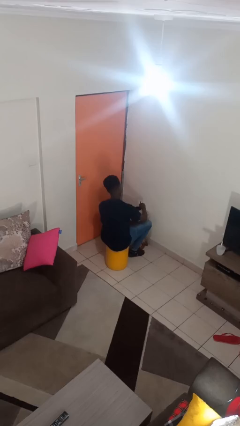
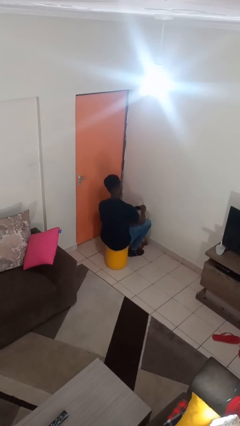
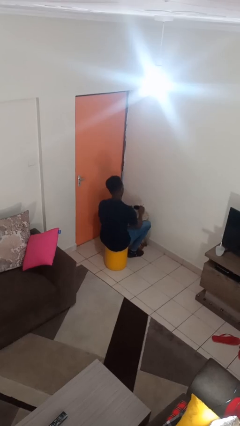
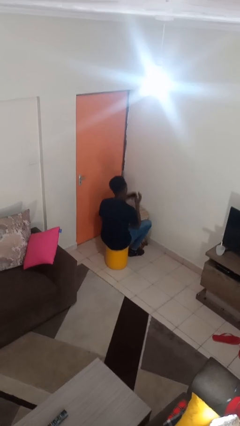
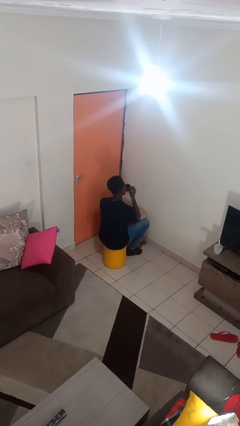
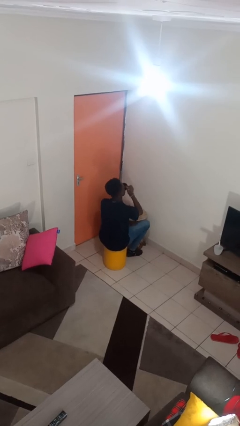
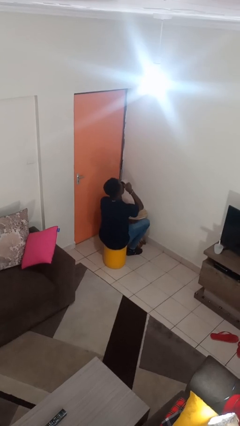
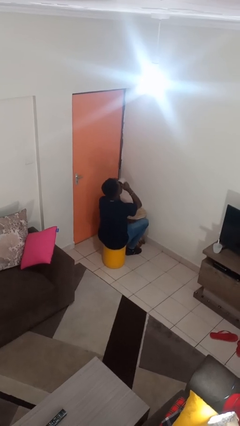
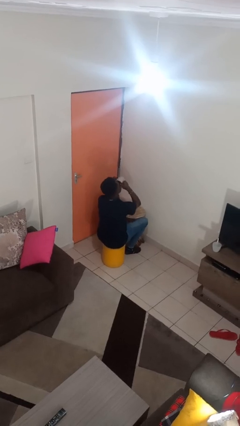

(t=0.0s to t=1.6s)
person drinks from mug

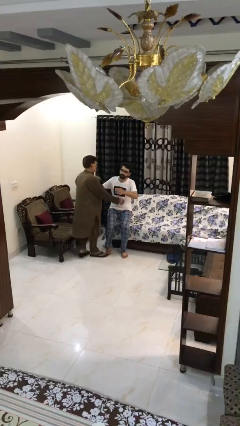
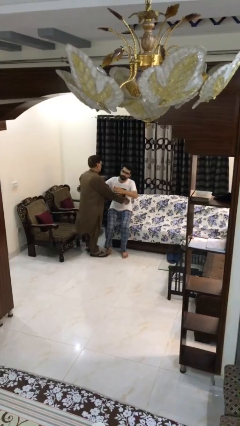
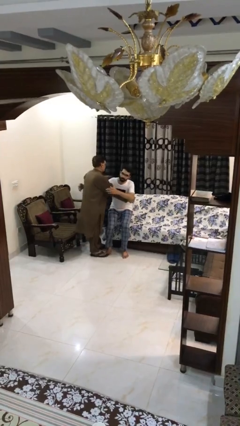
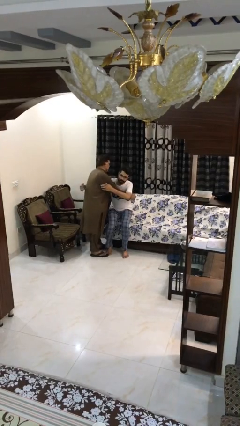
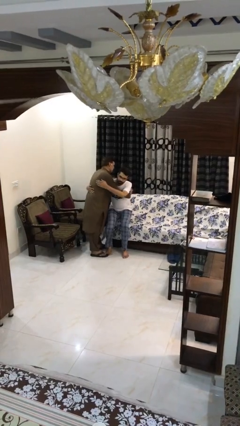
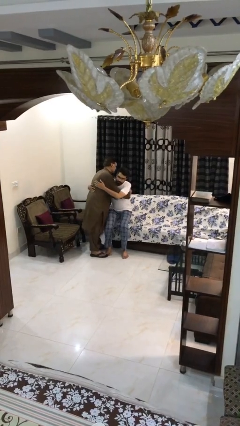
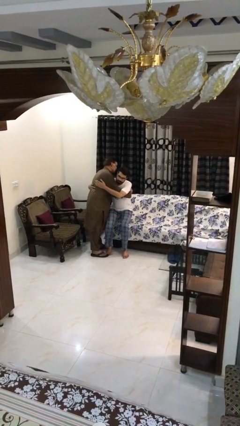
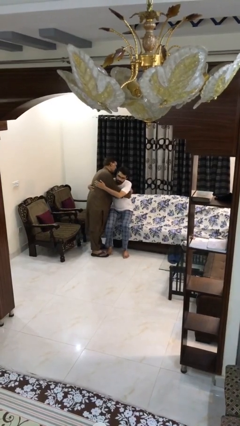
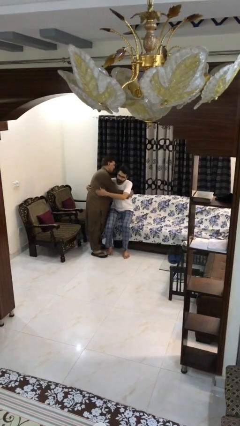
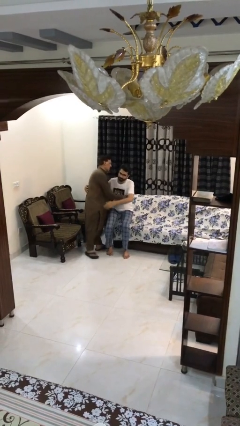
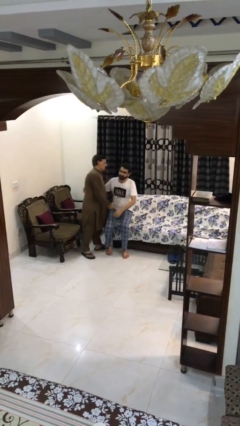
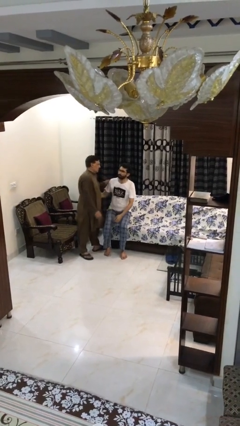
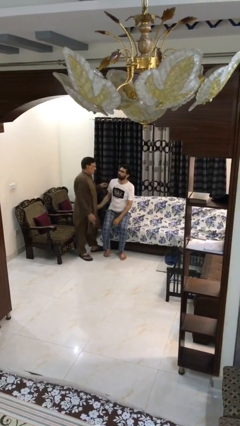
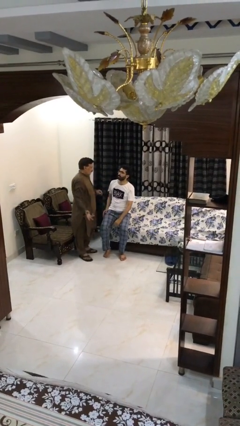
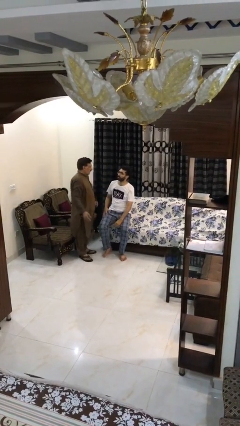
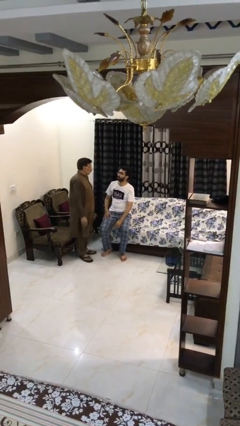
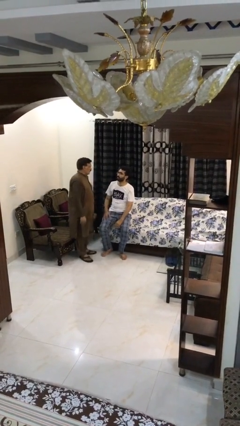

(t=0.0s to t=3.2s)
person embraces person

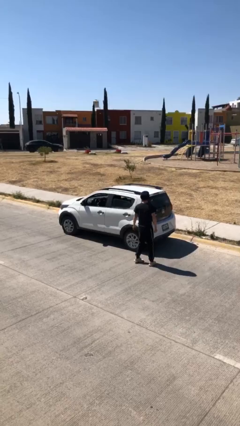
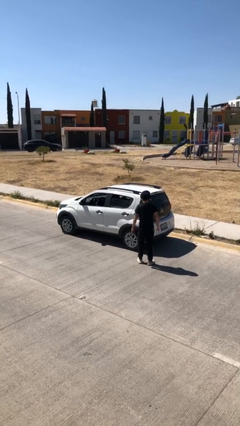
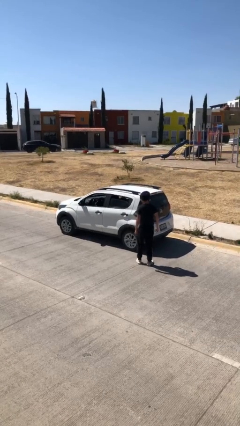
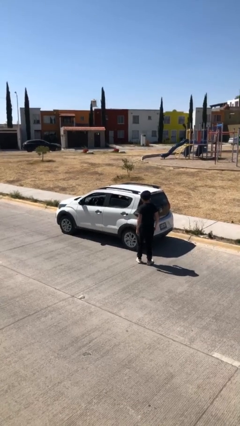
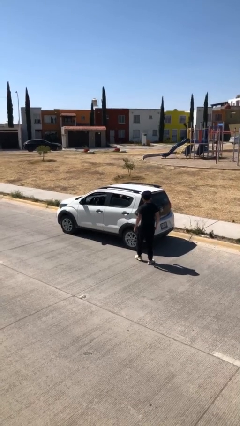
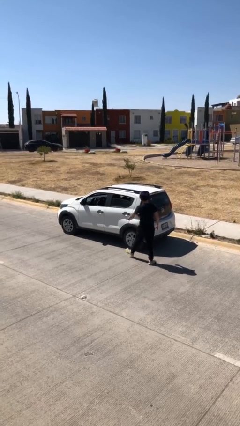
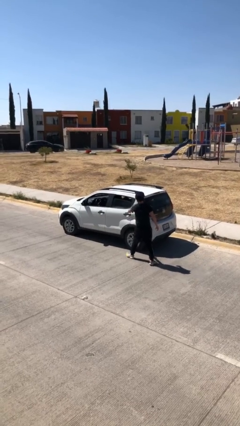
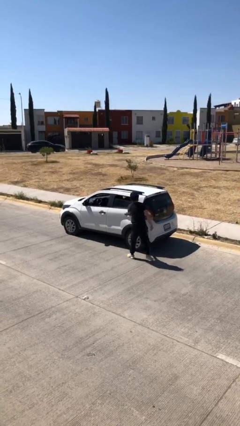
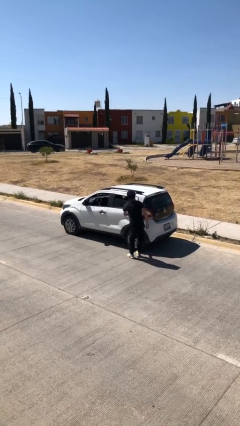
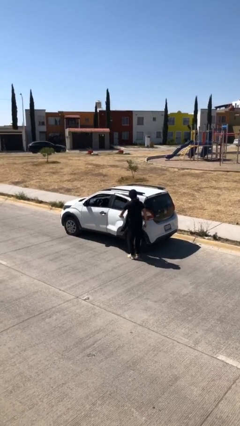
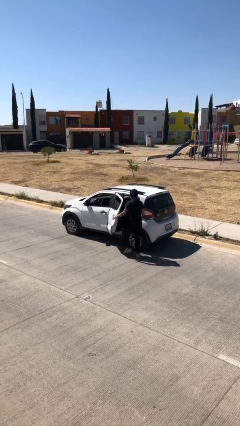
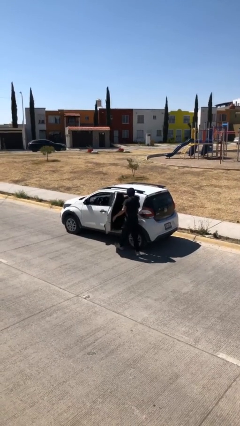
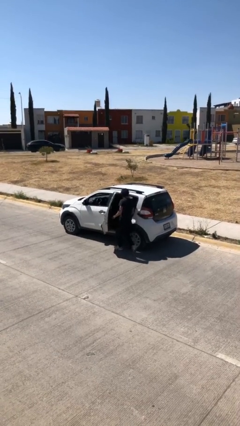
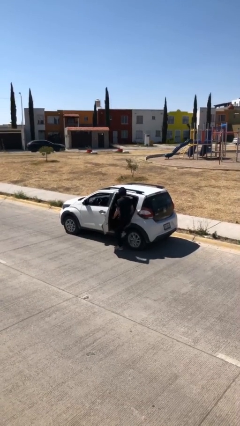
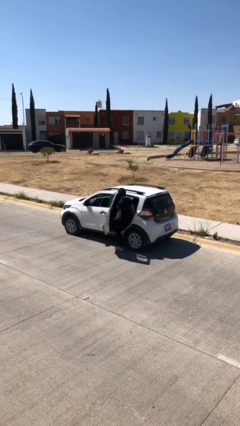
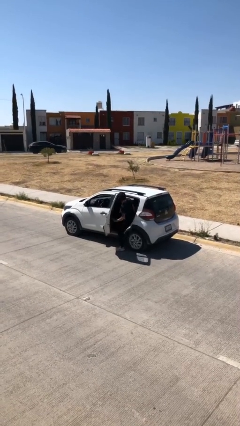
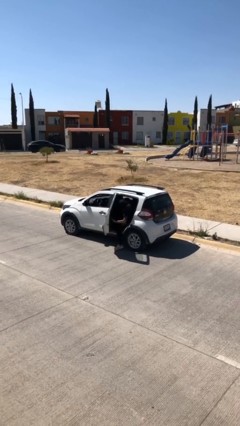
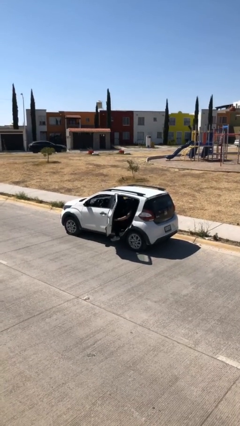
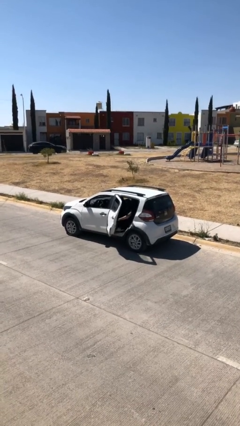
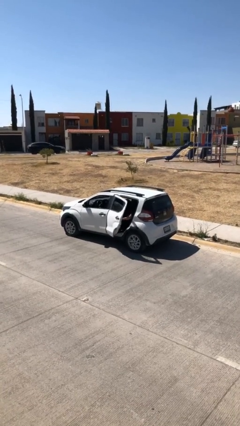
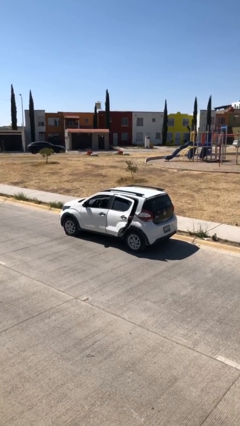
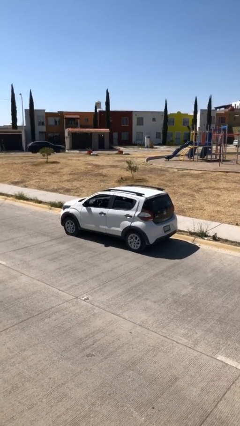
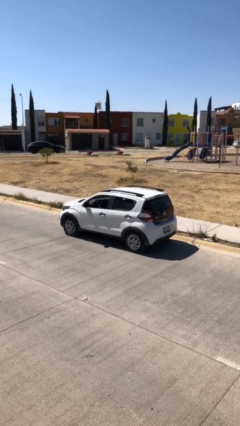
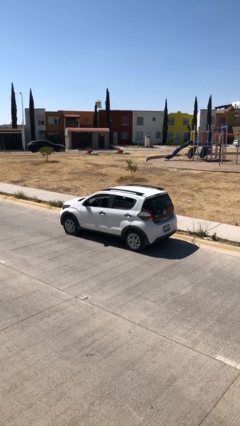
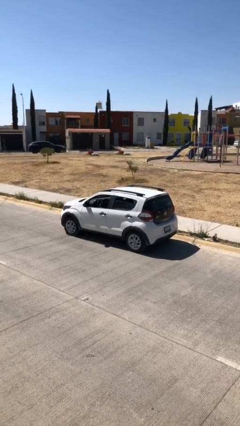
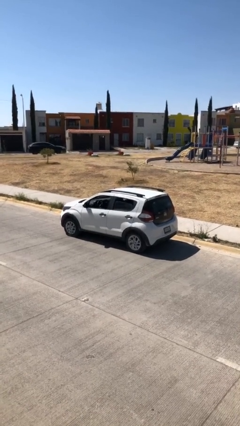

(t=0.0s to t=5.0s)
car picks up person

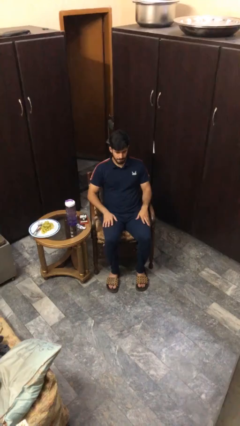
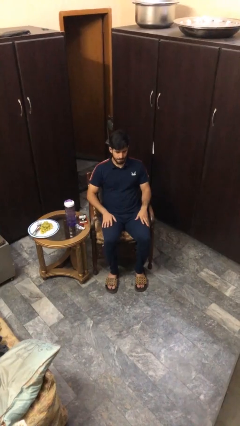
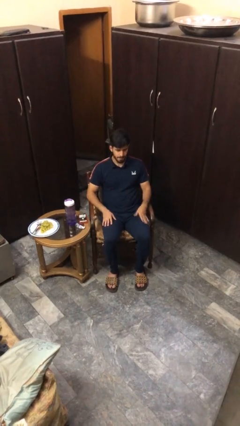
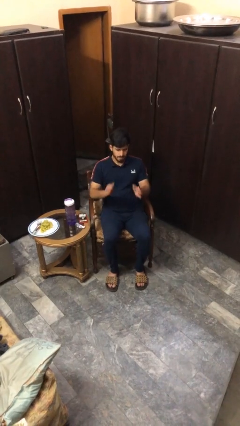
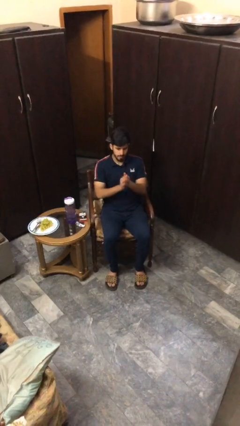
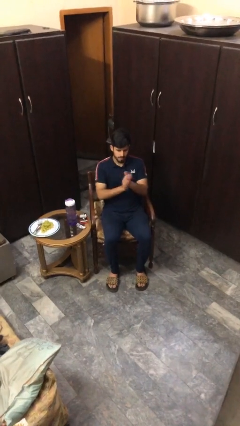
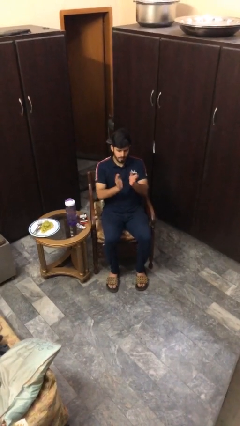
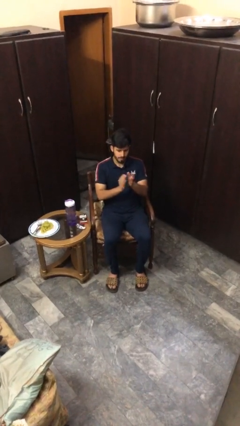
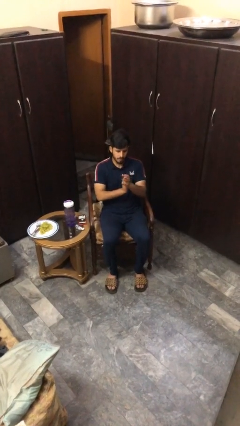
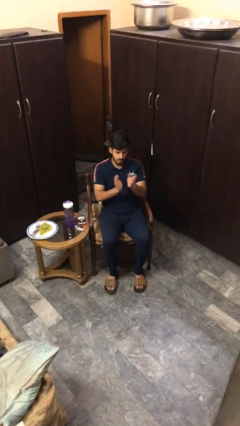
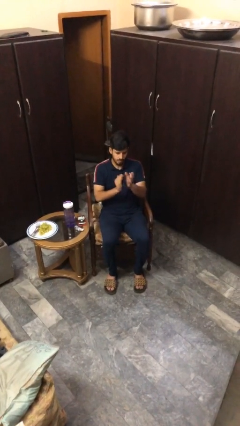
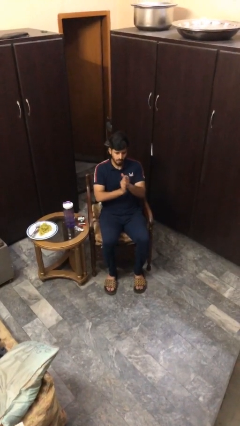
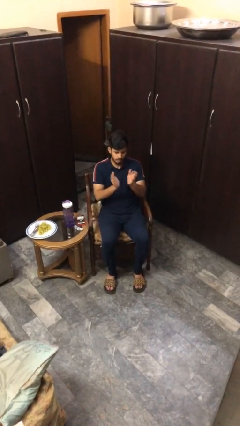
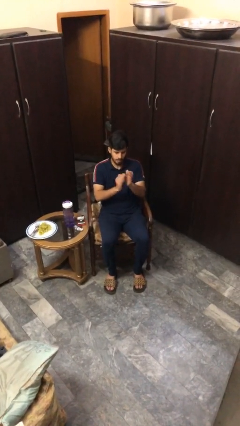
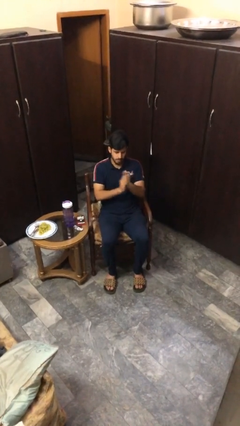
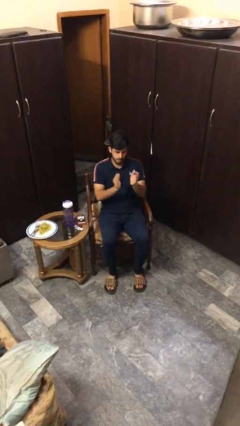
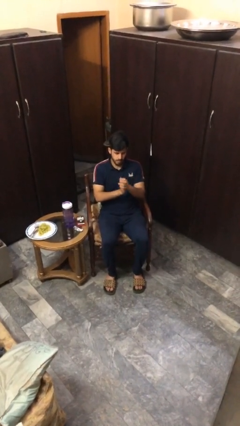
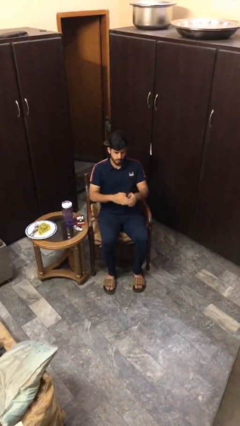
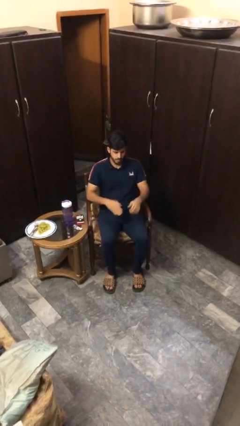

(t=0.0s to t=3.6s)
person claps hands

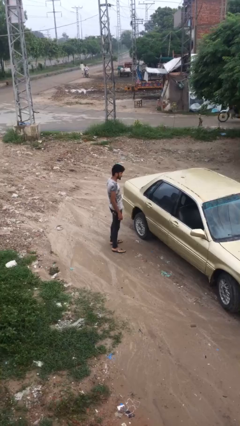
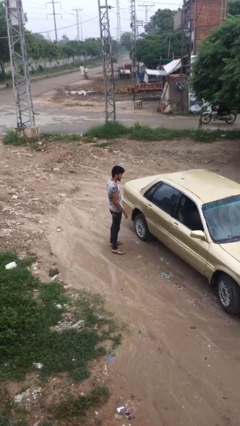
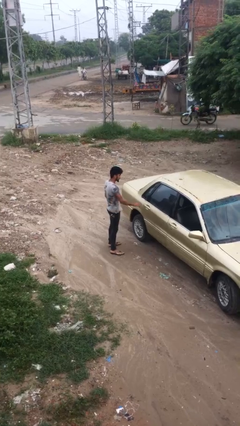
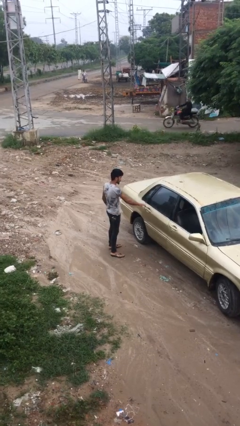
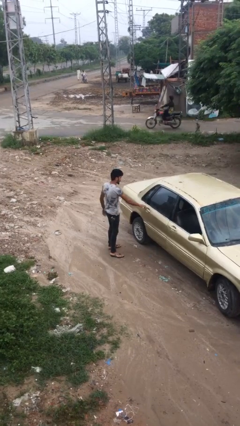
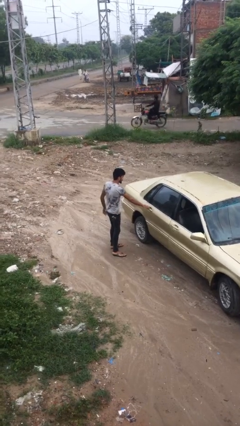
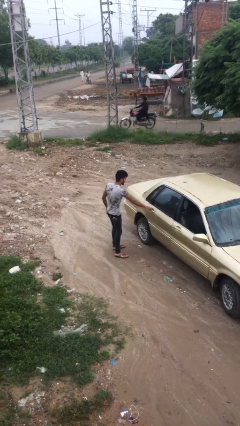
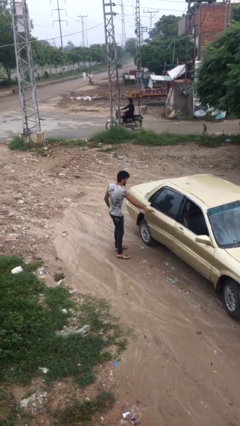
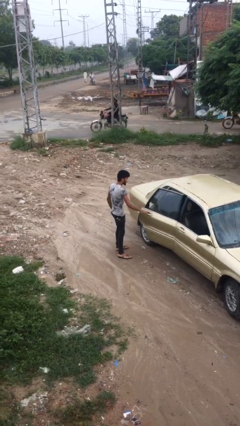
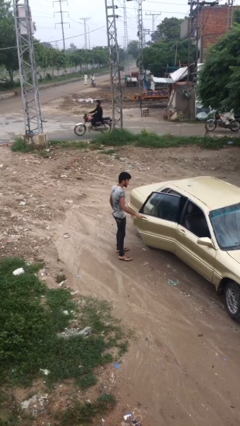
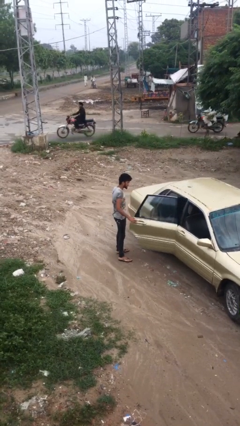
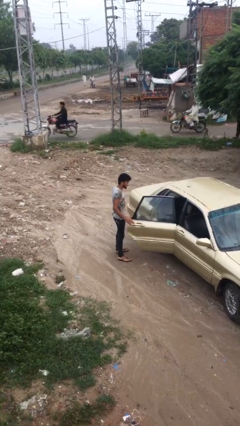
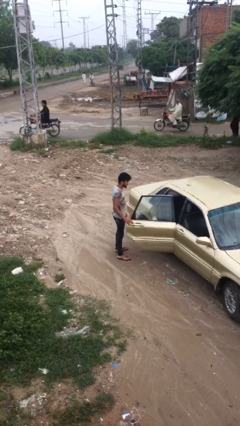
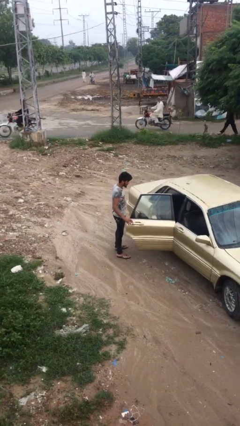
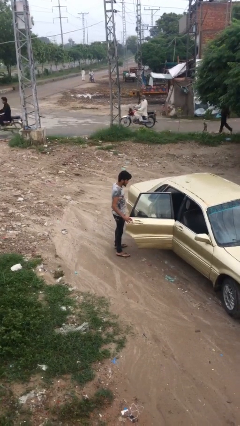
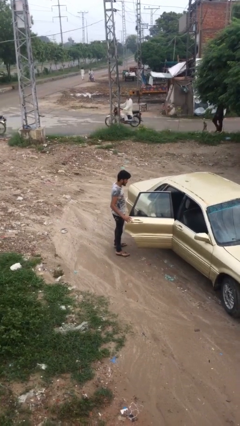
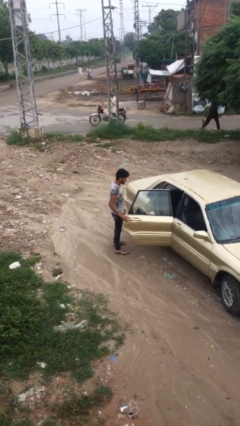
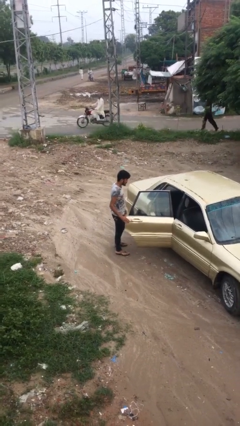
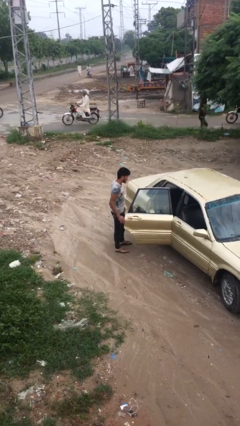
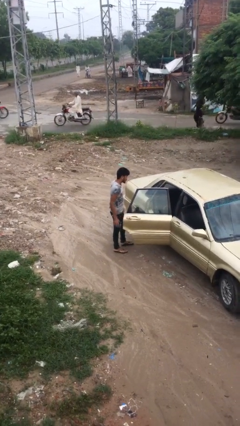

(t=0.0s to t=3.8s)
person opens car door
